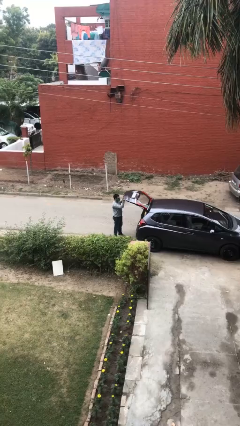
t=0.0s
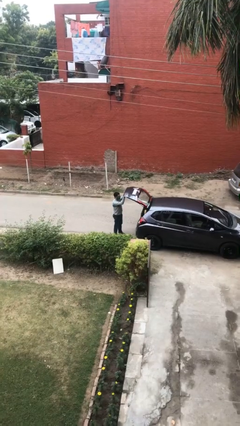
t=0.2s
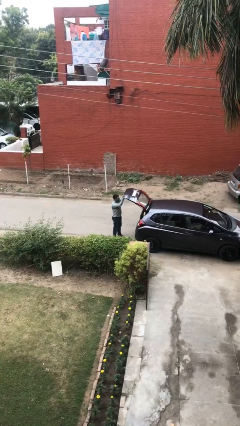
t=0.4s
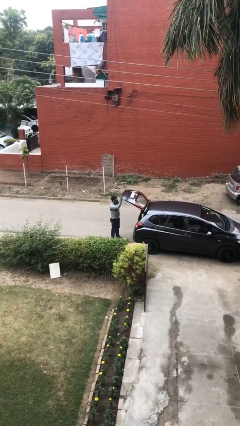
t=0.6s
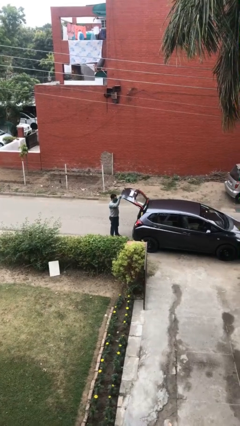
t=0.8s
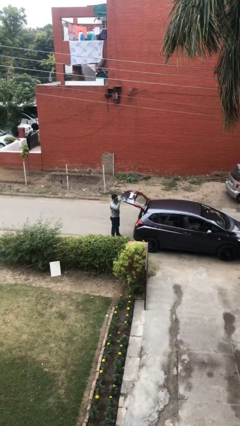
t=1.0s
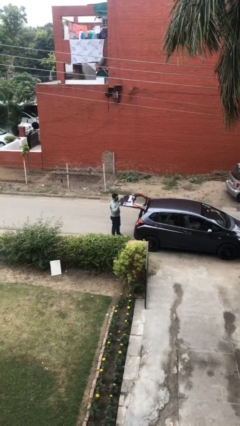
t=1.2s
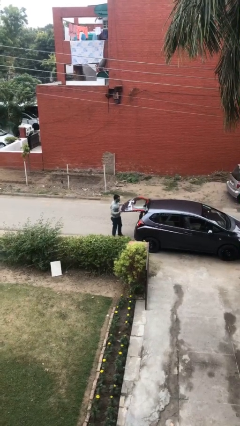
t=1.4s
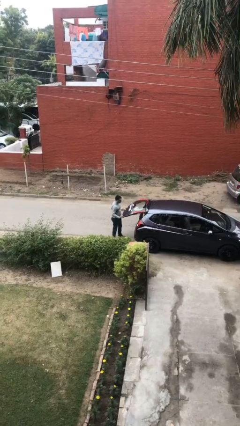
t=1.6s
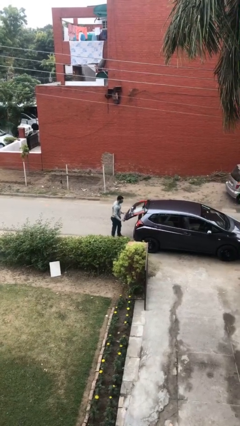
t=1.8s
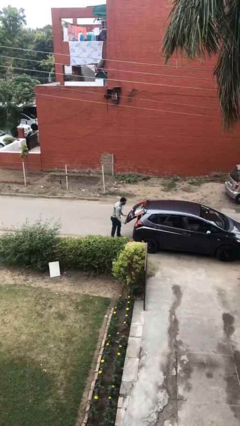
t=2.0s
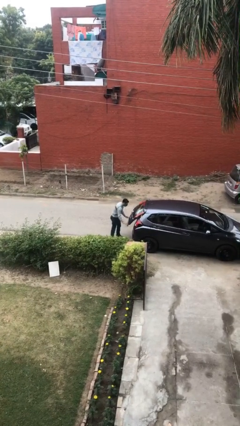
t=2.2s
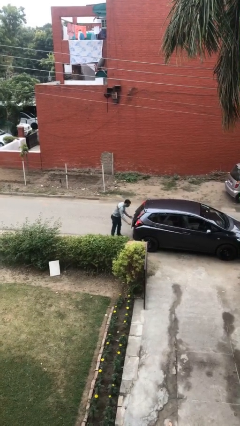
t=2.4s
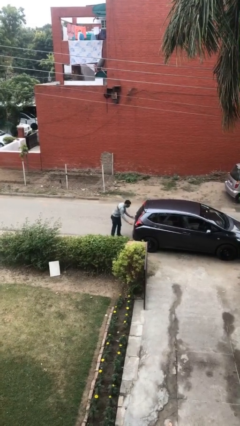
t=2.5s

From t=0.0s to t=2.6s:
person closes car trunk

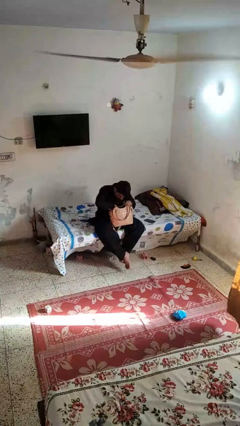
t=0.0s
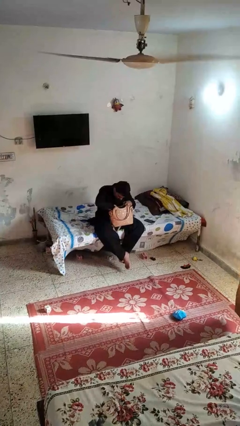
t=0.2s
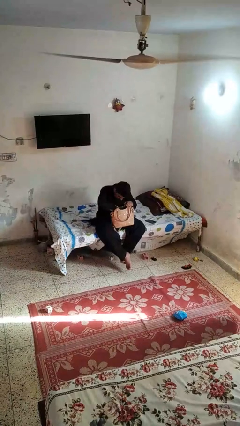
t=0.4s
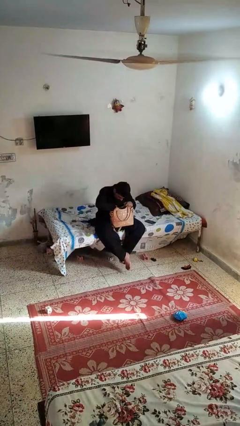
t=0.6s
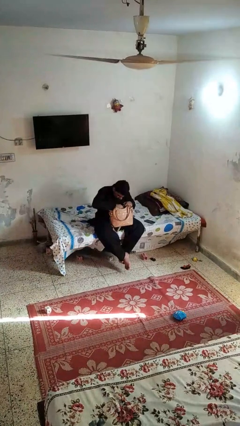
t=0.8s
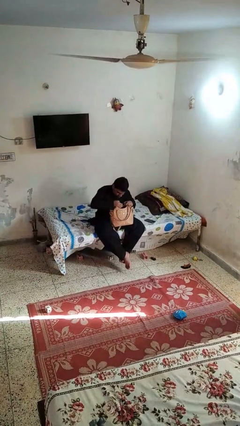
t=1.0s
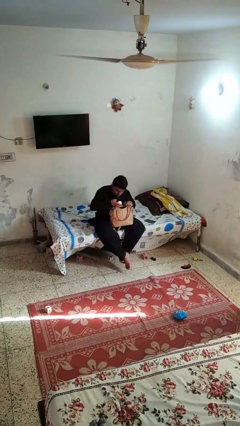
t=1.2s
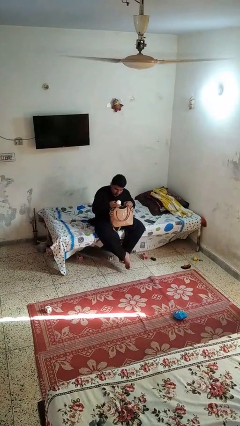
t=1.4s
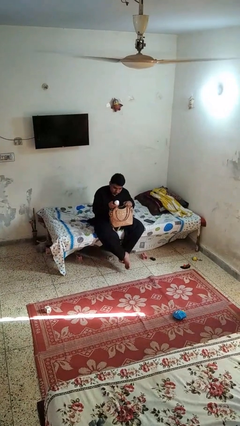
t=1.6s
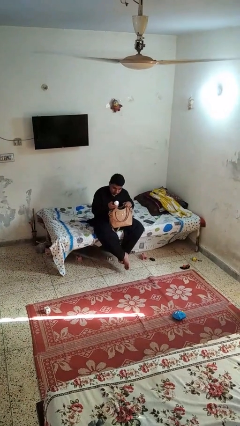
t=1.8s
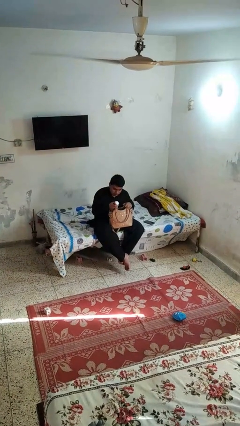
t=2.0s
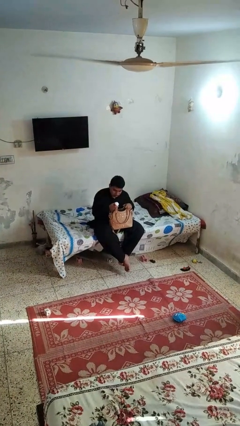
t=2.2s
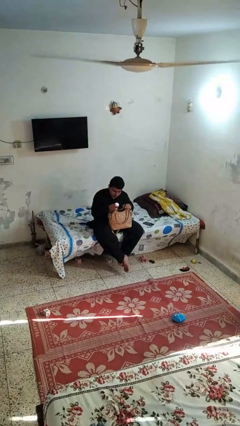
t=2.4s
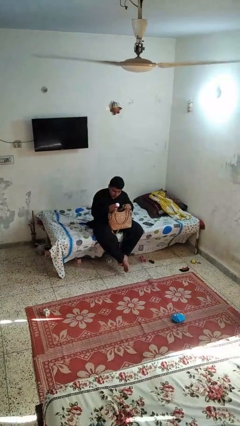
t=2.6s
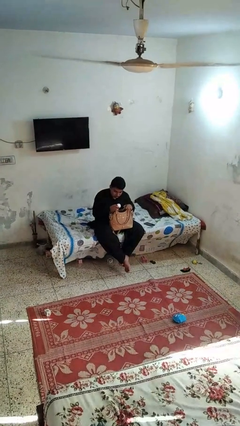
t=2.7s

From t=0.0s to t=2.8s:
person takes object from purse

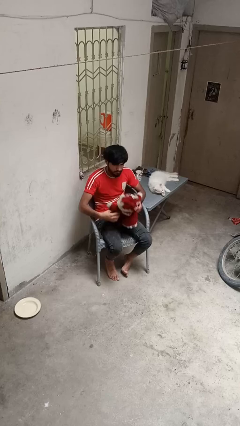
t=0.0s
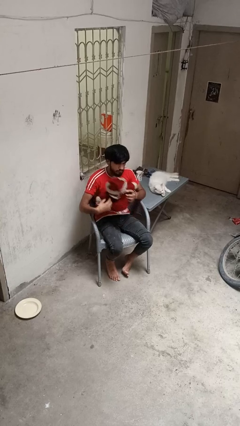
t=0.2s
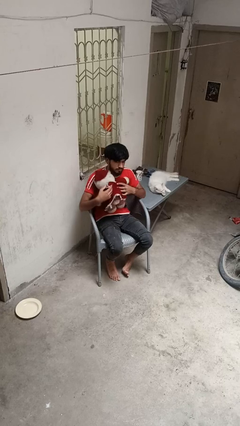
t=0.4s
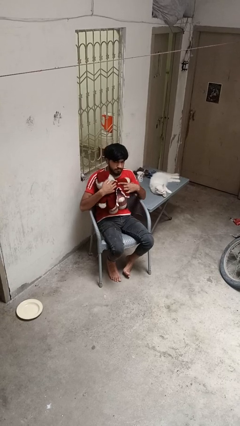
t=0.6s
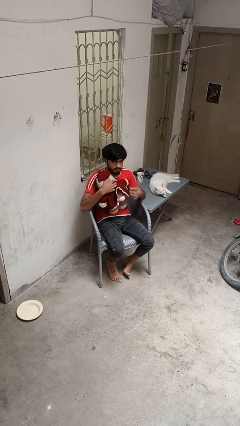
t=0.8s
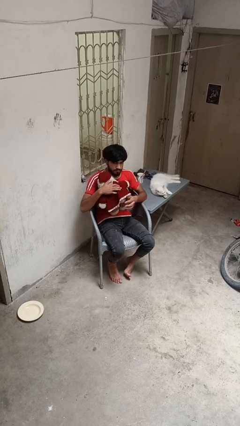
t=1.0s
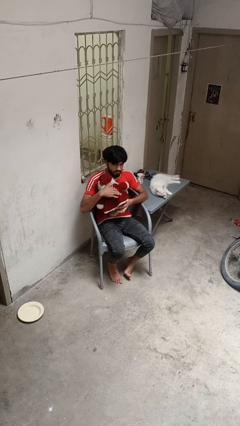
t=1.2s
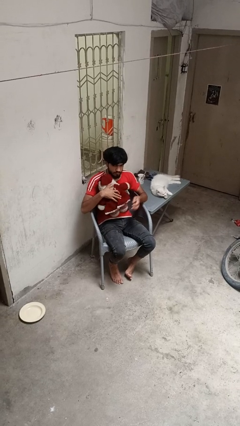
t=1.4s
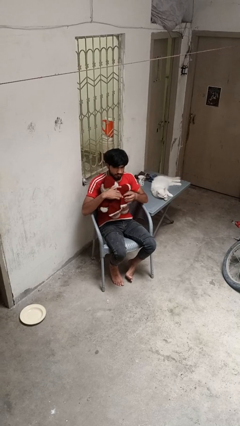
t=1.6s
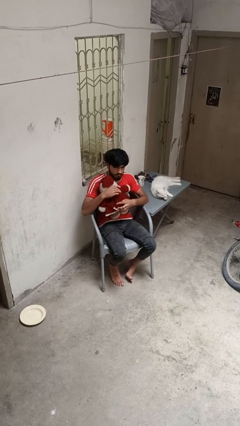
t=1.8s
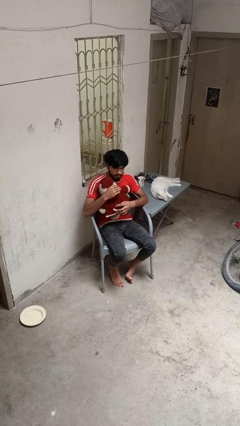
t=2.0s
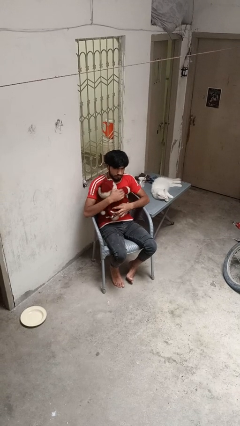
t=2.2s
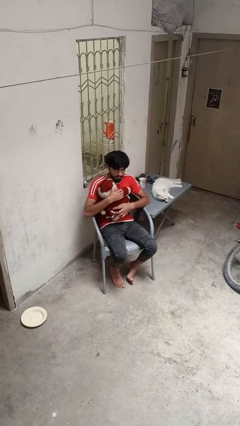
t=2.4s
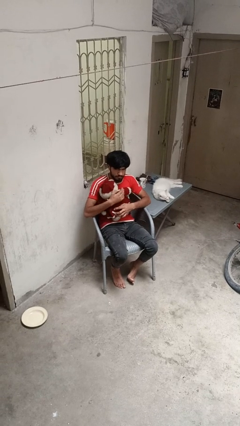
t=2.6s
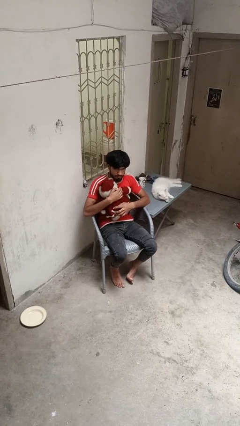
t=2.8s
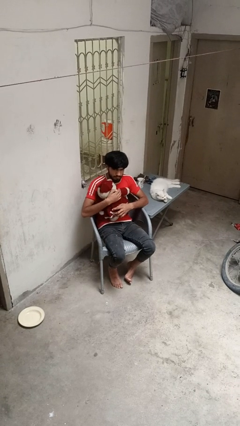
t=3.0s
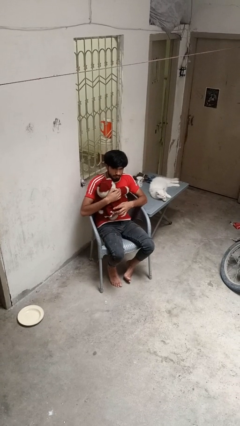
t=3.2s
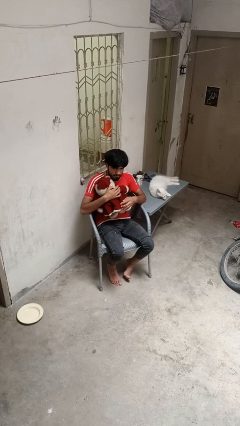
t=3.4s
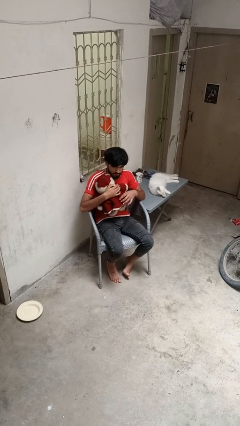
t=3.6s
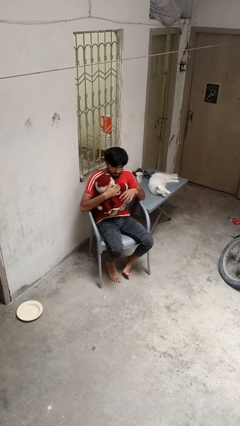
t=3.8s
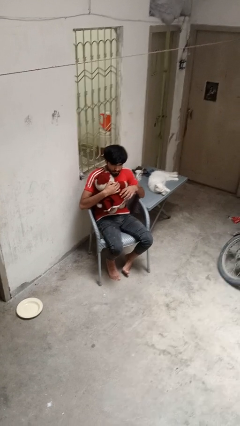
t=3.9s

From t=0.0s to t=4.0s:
person hugs stuffed animal

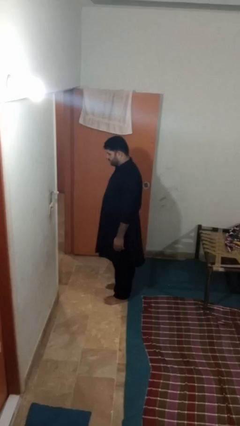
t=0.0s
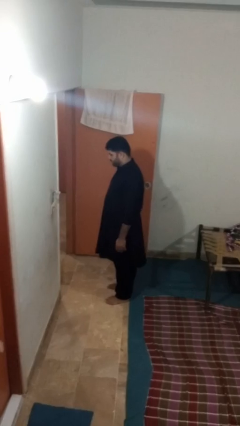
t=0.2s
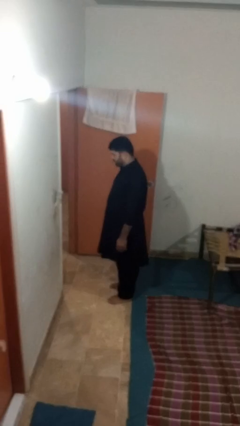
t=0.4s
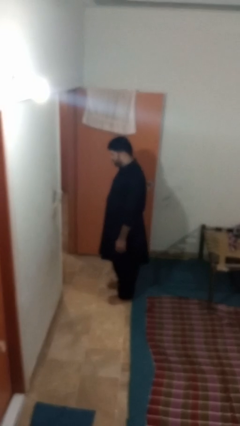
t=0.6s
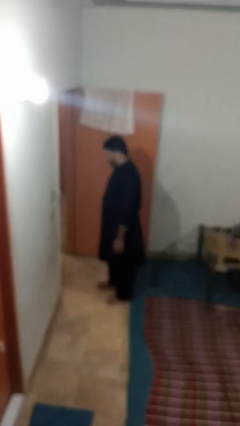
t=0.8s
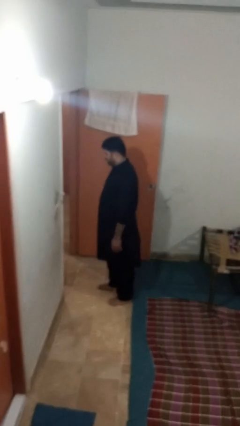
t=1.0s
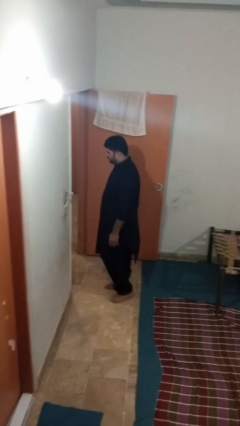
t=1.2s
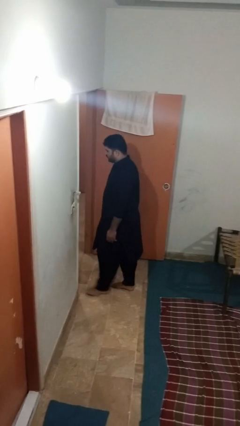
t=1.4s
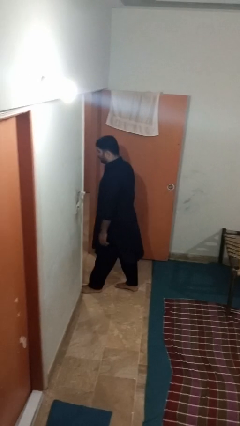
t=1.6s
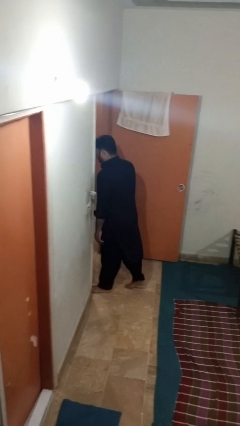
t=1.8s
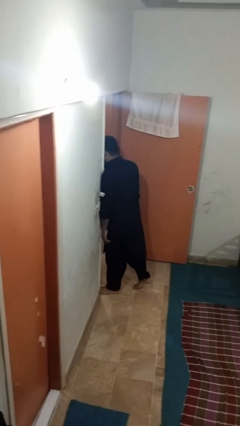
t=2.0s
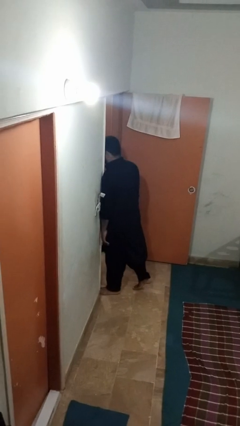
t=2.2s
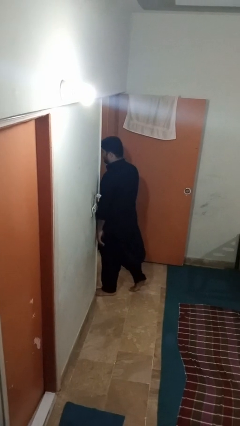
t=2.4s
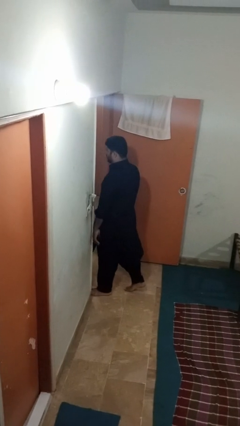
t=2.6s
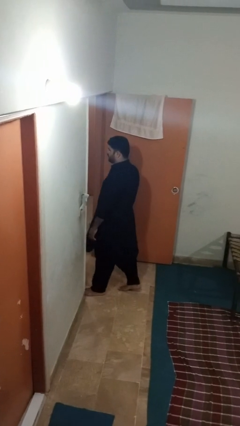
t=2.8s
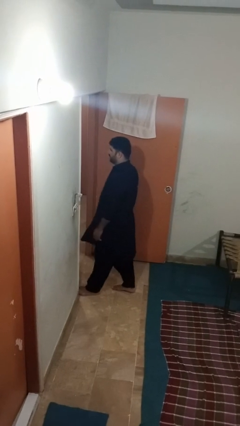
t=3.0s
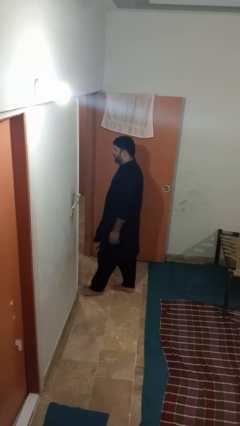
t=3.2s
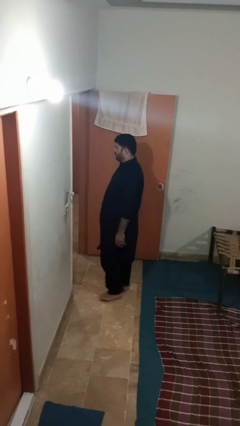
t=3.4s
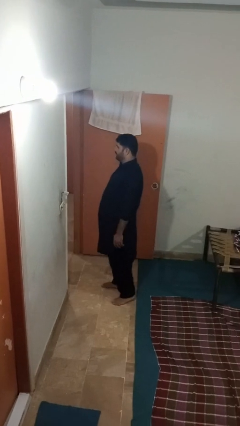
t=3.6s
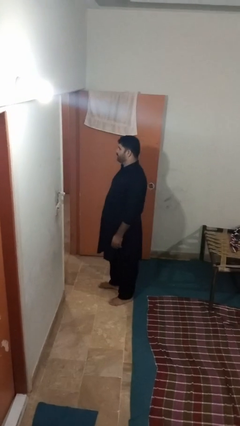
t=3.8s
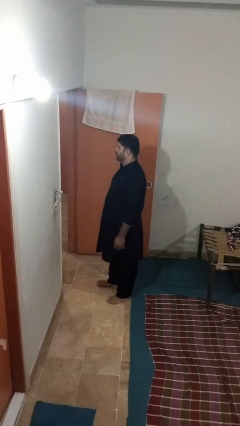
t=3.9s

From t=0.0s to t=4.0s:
person bumps into wall

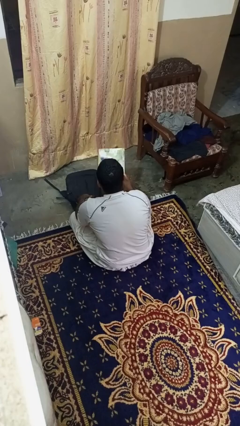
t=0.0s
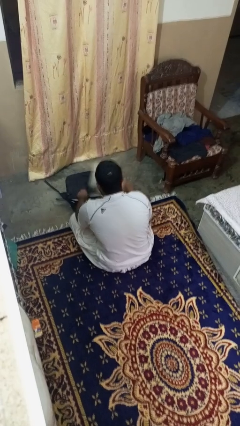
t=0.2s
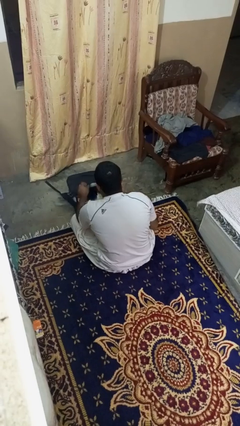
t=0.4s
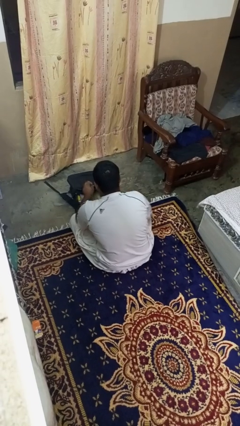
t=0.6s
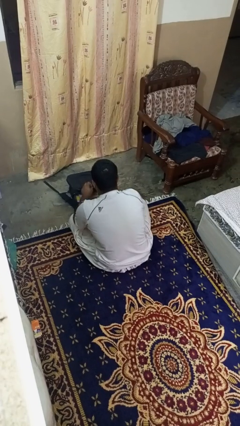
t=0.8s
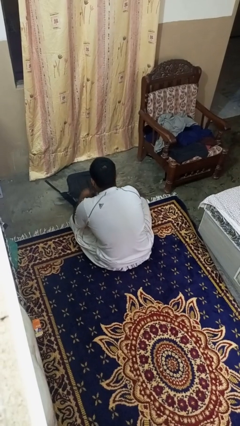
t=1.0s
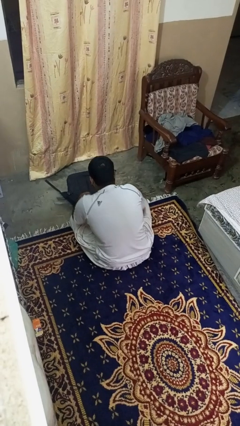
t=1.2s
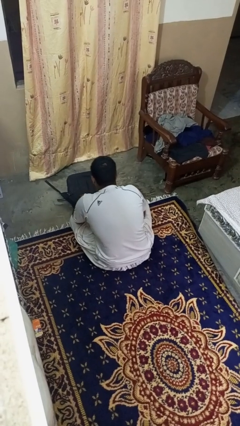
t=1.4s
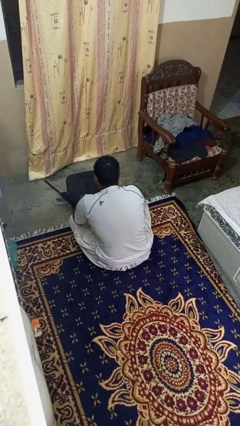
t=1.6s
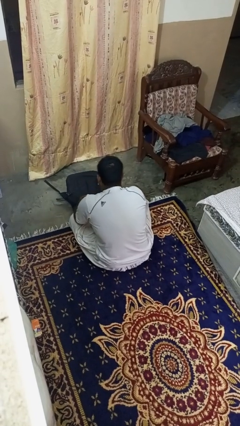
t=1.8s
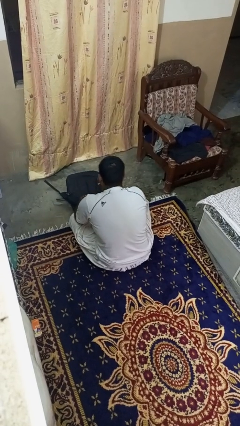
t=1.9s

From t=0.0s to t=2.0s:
person puts object into bag

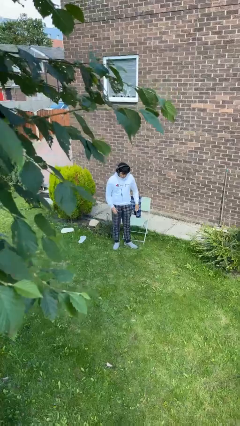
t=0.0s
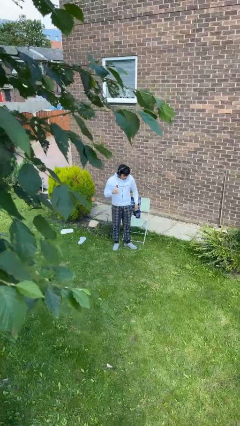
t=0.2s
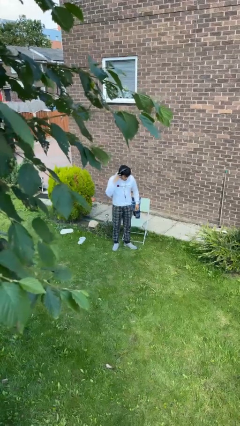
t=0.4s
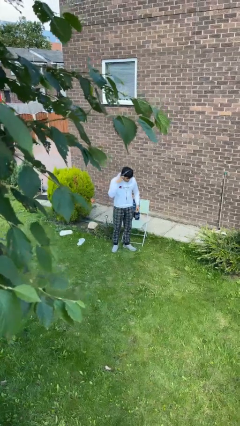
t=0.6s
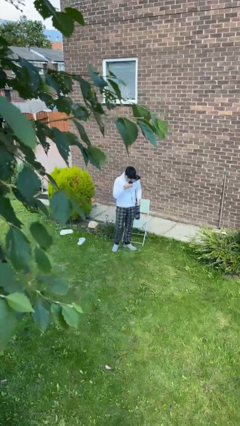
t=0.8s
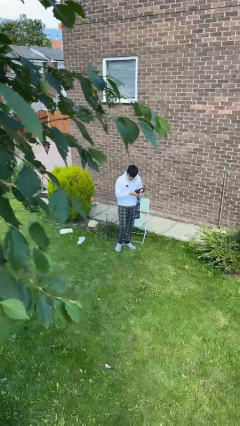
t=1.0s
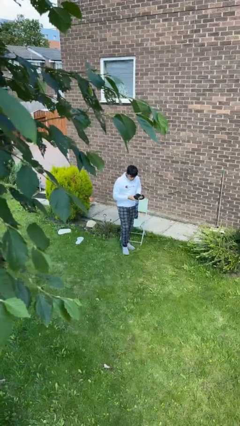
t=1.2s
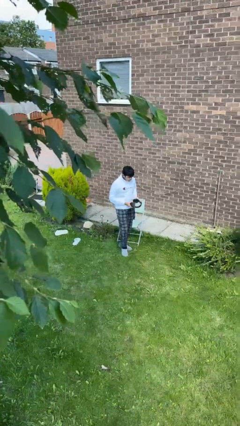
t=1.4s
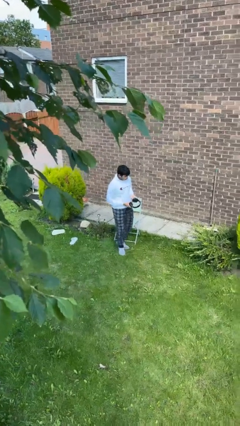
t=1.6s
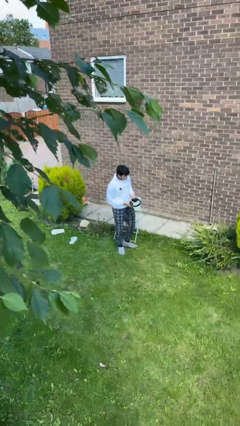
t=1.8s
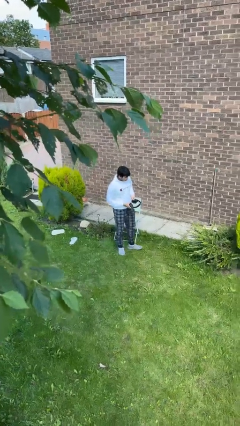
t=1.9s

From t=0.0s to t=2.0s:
person takes off headphones

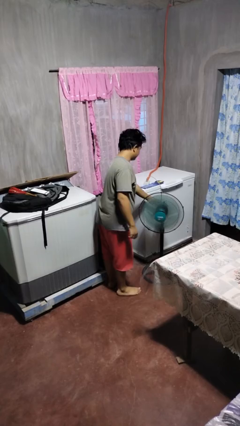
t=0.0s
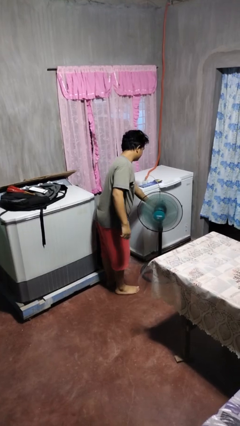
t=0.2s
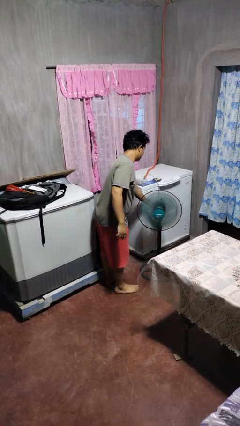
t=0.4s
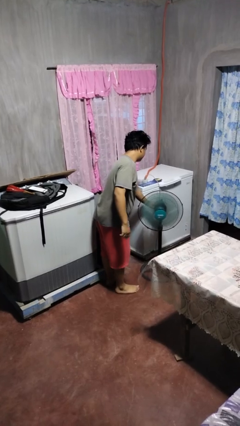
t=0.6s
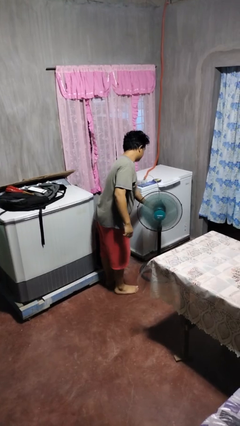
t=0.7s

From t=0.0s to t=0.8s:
person turns off fan
